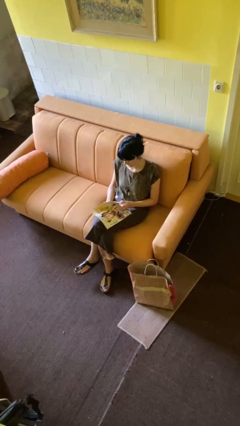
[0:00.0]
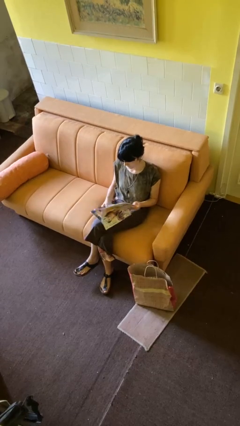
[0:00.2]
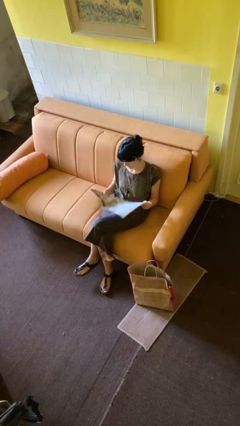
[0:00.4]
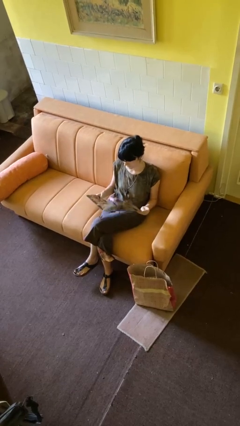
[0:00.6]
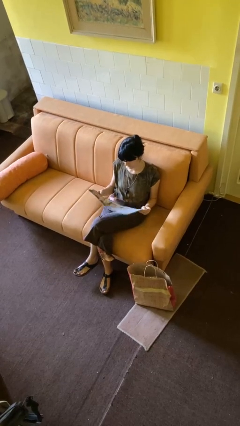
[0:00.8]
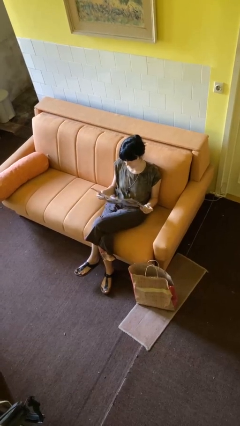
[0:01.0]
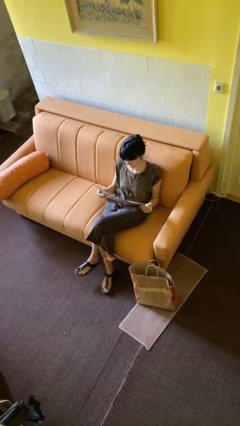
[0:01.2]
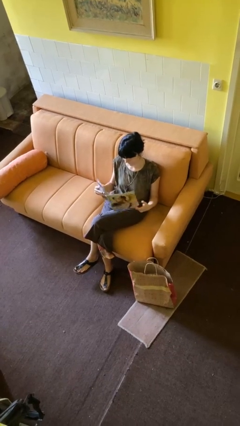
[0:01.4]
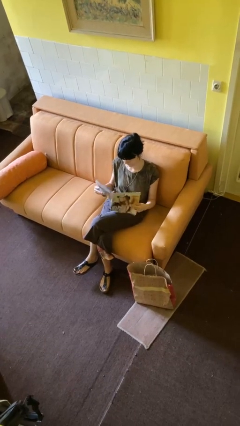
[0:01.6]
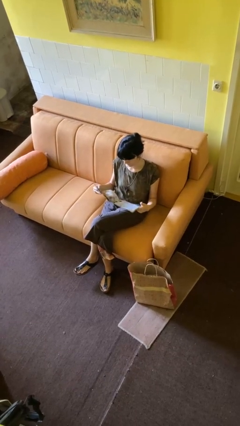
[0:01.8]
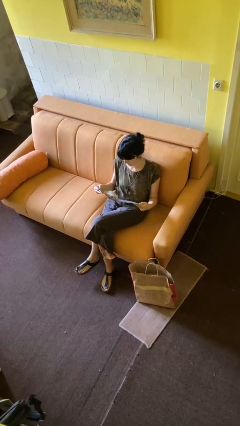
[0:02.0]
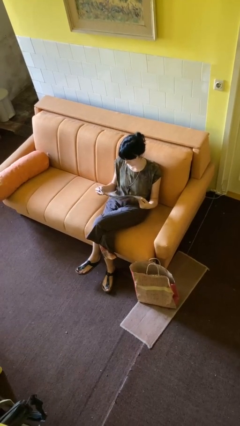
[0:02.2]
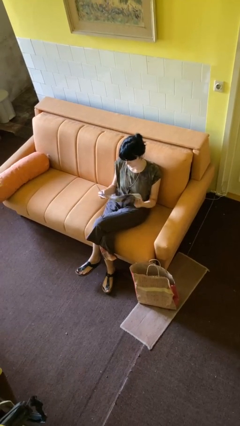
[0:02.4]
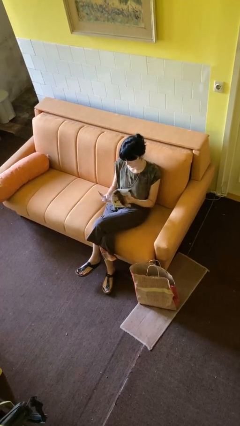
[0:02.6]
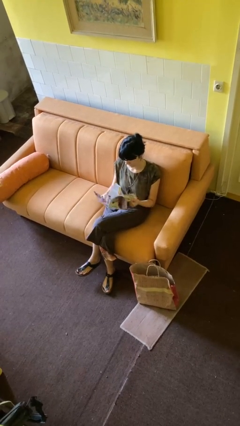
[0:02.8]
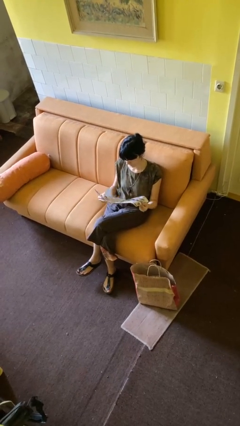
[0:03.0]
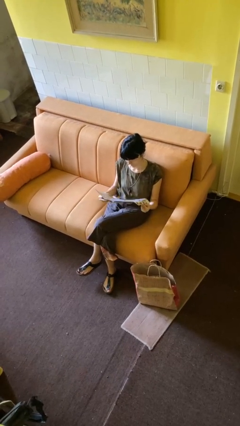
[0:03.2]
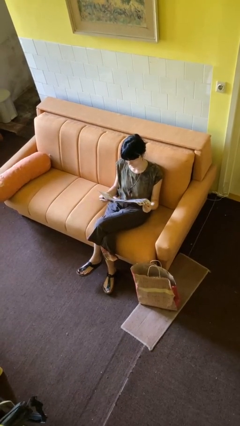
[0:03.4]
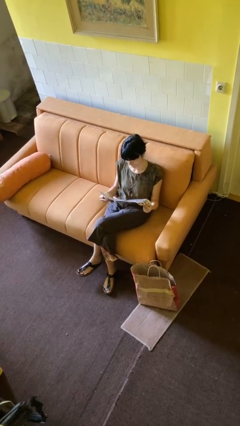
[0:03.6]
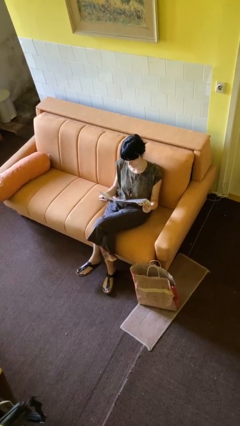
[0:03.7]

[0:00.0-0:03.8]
person reads magazine

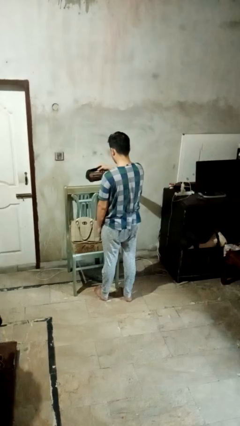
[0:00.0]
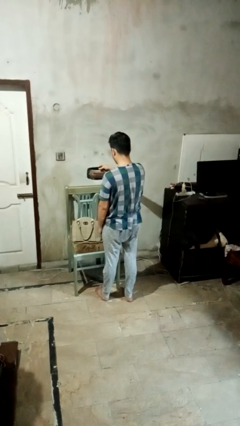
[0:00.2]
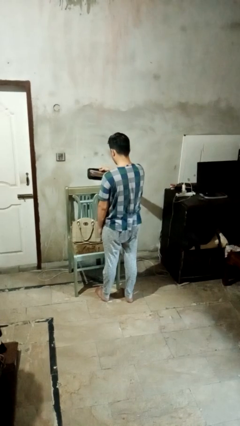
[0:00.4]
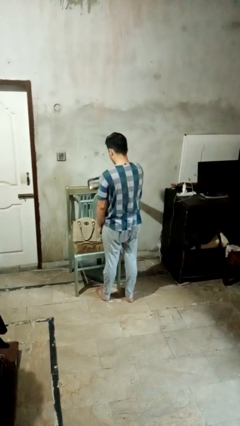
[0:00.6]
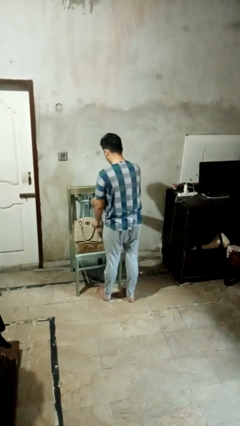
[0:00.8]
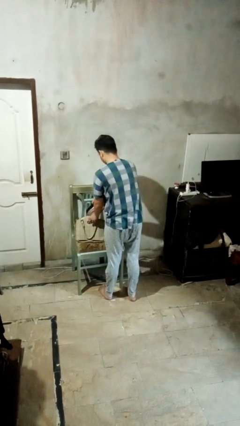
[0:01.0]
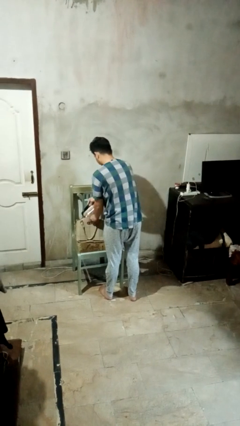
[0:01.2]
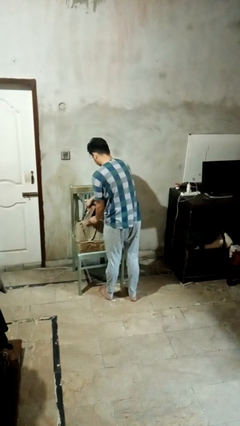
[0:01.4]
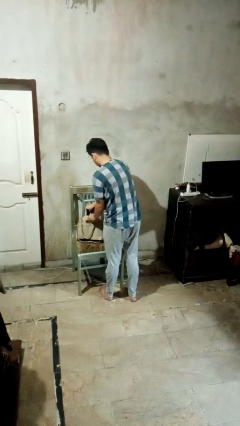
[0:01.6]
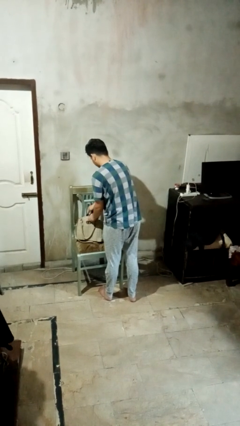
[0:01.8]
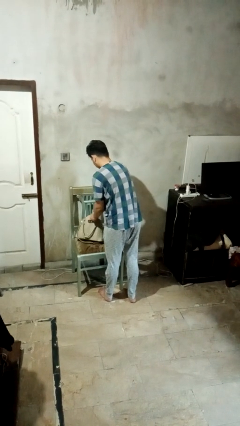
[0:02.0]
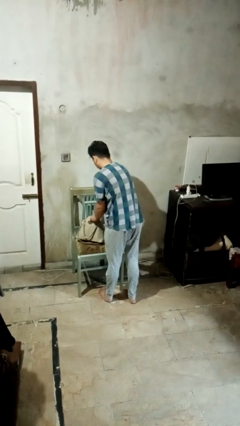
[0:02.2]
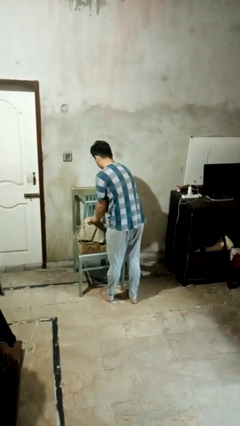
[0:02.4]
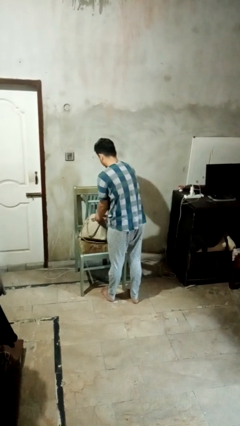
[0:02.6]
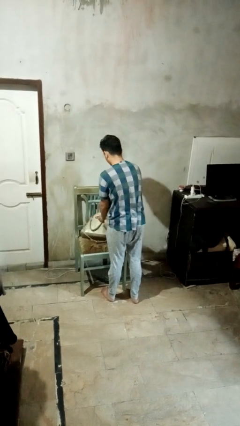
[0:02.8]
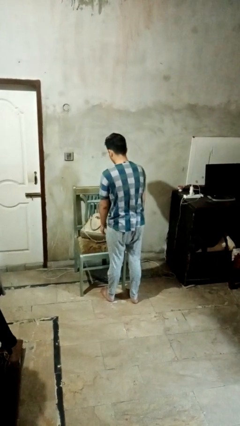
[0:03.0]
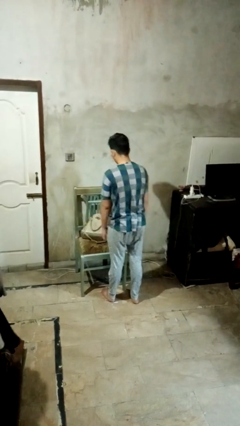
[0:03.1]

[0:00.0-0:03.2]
person puts object into purse

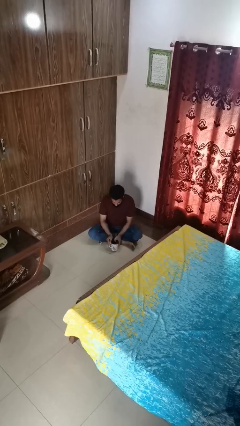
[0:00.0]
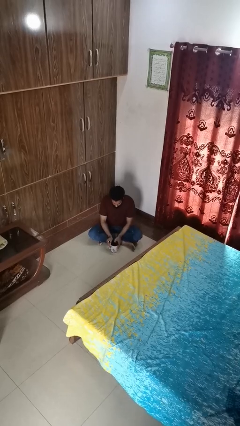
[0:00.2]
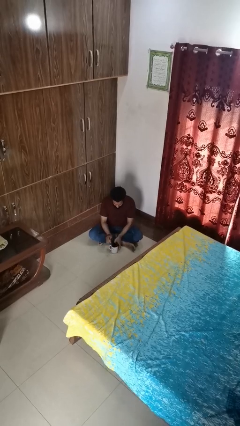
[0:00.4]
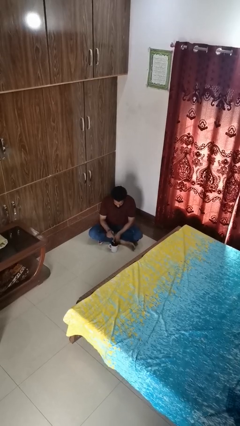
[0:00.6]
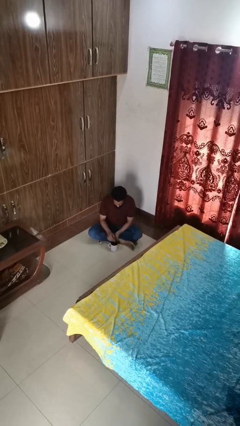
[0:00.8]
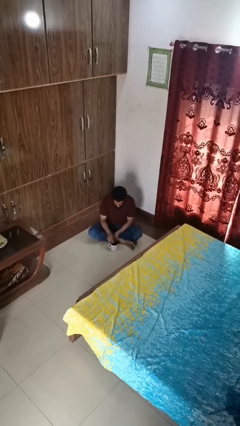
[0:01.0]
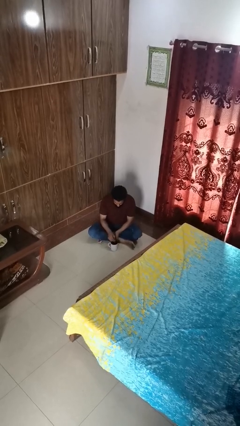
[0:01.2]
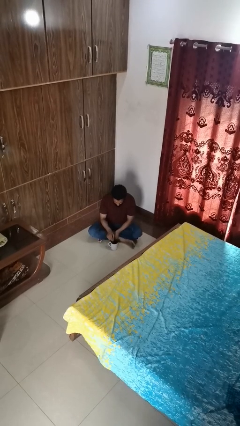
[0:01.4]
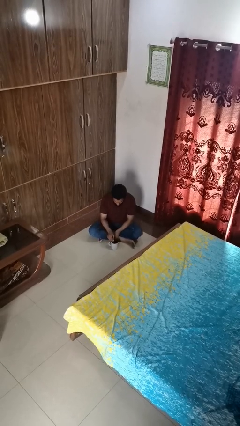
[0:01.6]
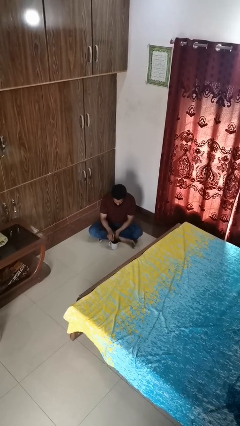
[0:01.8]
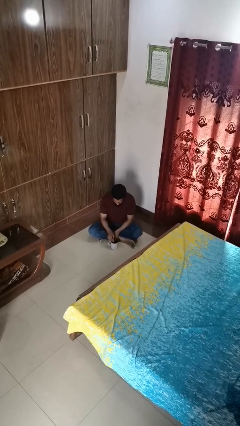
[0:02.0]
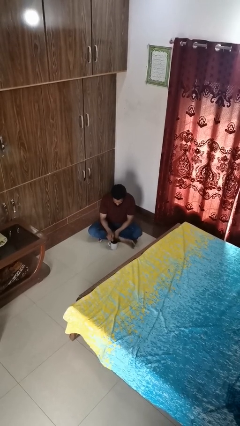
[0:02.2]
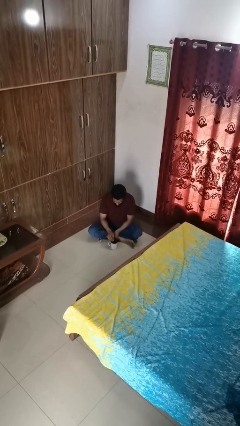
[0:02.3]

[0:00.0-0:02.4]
person stirs mug

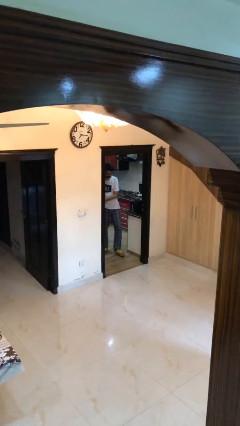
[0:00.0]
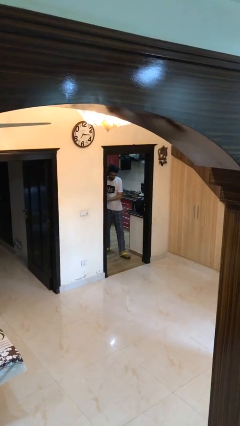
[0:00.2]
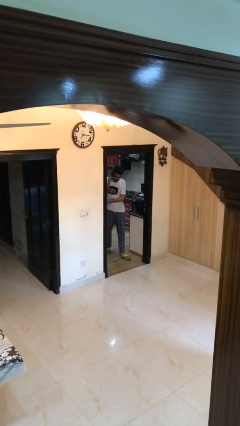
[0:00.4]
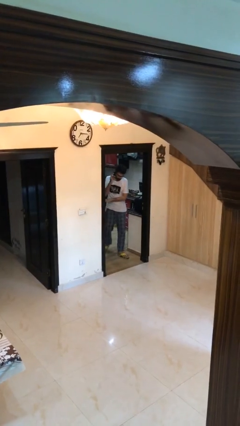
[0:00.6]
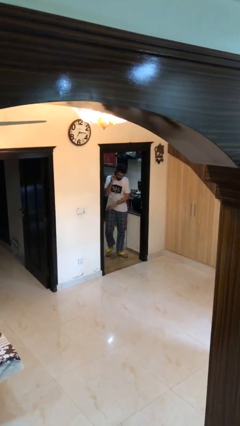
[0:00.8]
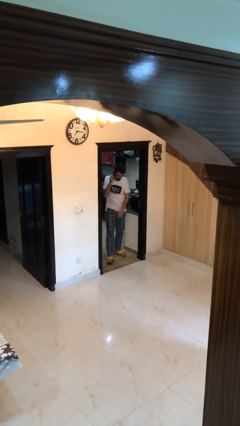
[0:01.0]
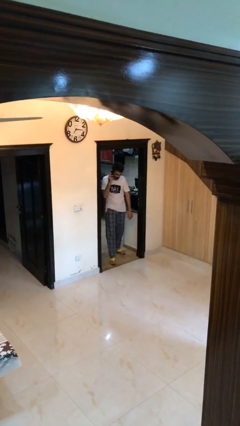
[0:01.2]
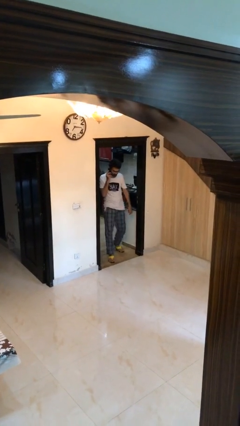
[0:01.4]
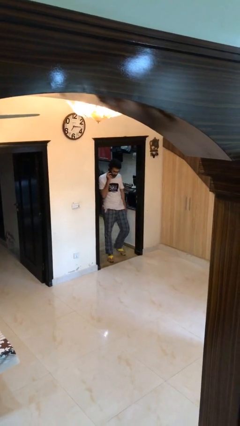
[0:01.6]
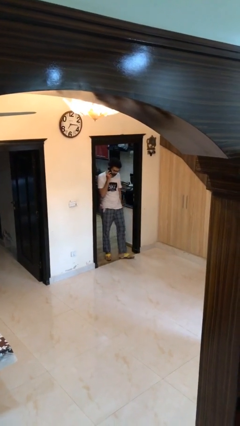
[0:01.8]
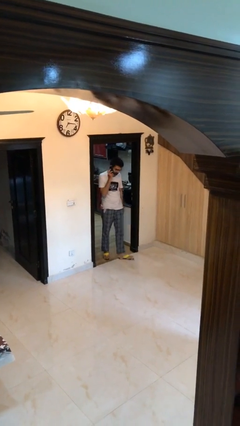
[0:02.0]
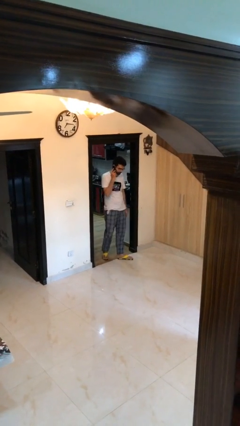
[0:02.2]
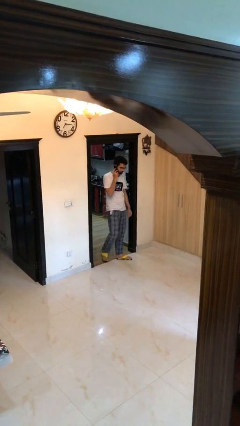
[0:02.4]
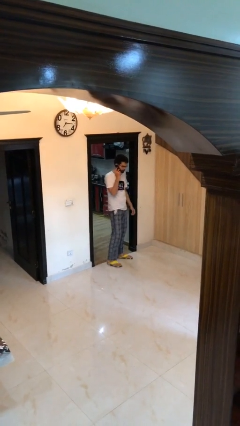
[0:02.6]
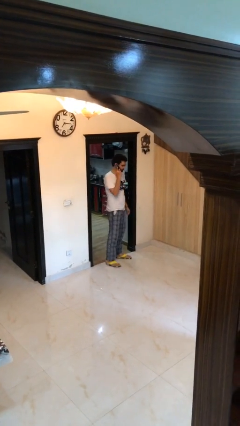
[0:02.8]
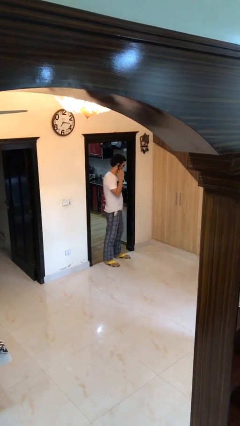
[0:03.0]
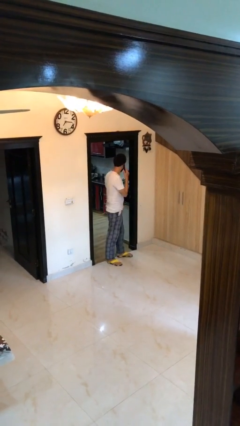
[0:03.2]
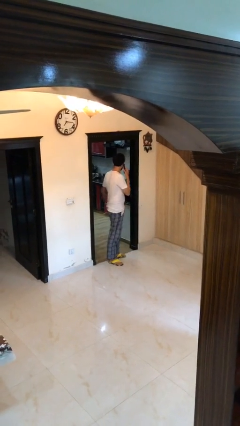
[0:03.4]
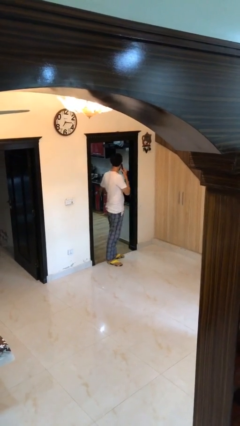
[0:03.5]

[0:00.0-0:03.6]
person exits scene through structure

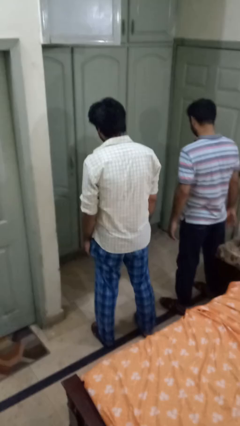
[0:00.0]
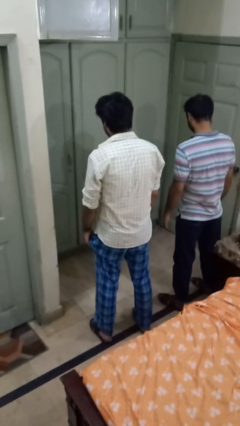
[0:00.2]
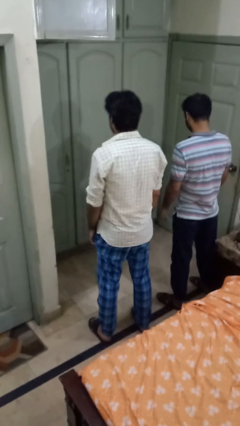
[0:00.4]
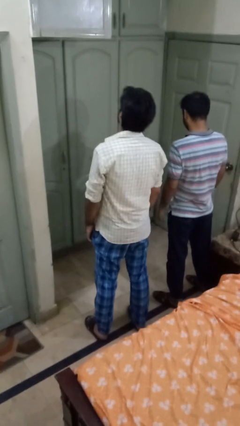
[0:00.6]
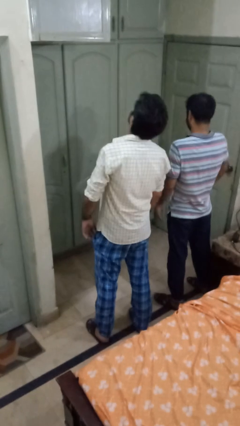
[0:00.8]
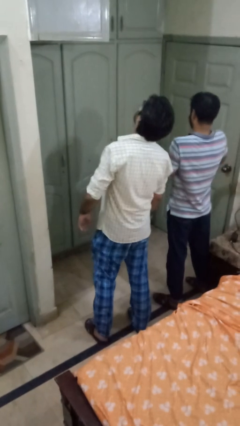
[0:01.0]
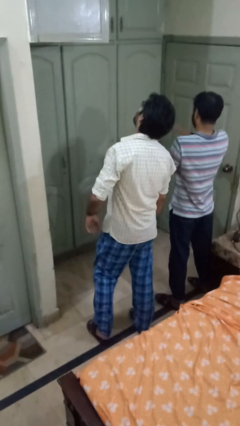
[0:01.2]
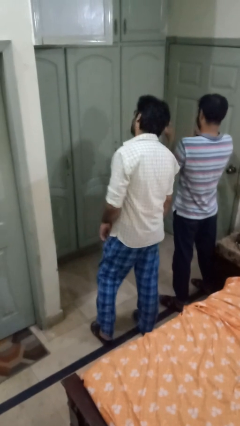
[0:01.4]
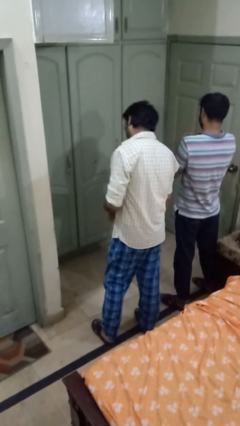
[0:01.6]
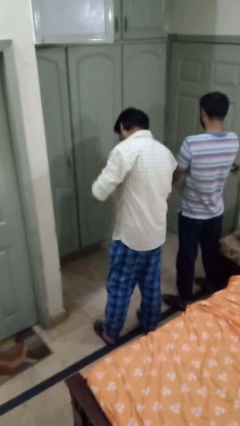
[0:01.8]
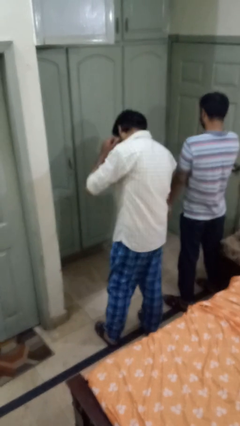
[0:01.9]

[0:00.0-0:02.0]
person laughs with person

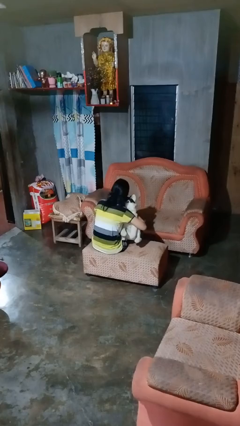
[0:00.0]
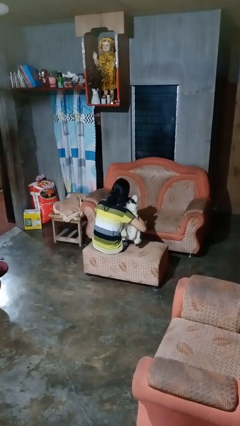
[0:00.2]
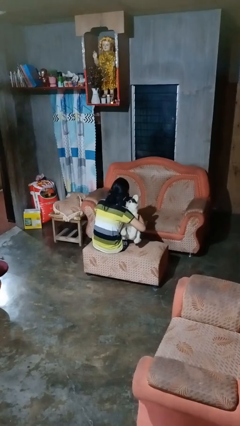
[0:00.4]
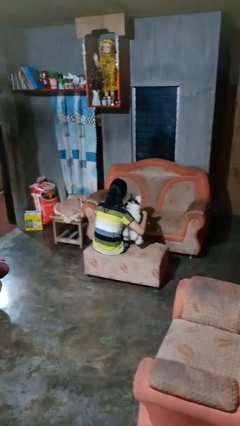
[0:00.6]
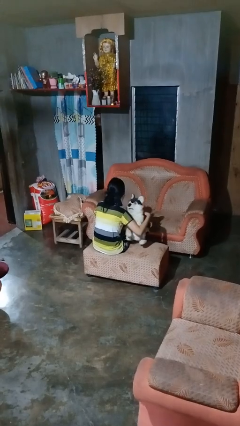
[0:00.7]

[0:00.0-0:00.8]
person hugs stuffed animal

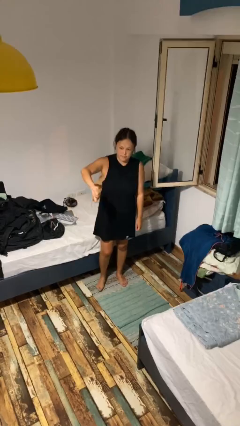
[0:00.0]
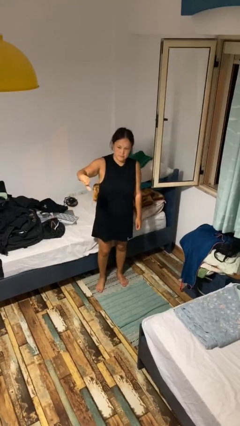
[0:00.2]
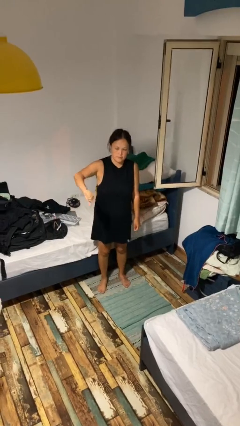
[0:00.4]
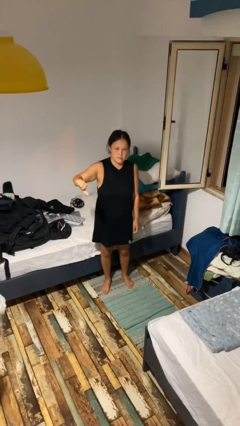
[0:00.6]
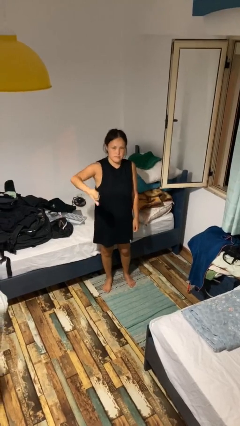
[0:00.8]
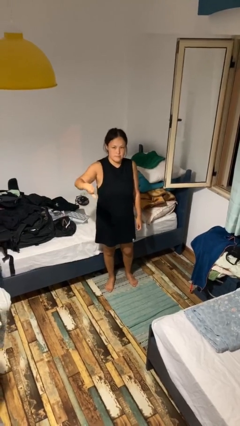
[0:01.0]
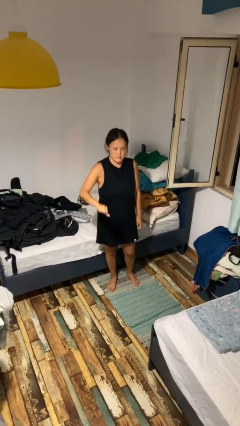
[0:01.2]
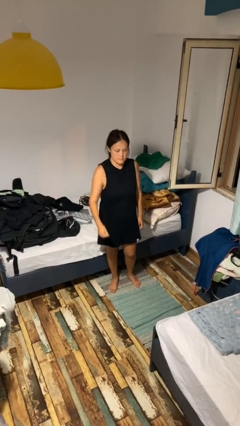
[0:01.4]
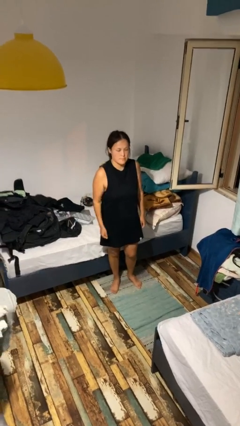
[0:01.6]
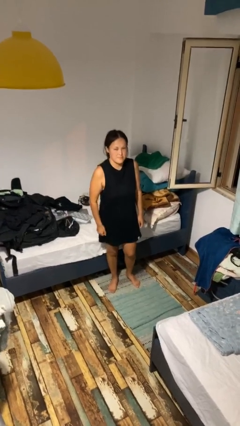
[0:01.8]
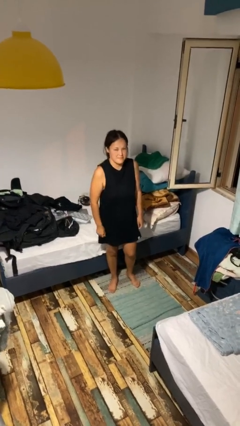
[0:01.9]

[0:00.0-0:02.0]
person gestures thumbs down
